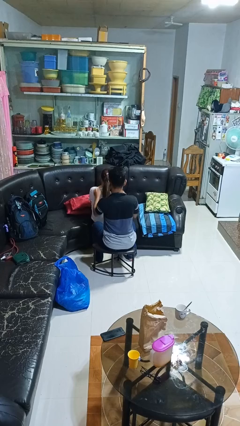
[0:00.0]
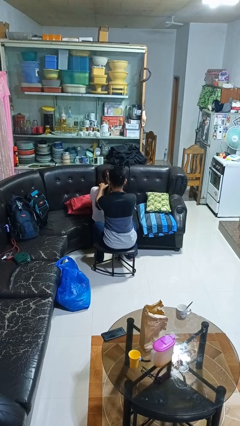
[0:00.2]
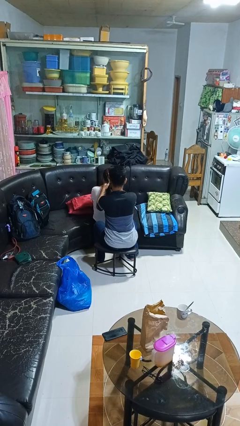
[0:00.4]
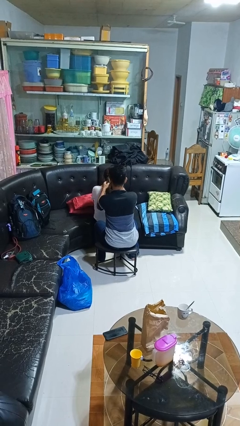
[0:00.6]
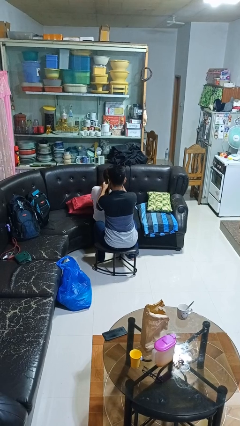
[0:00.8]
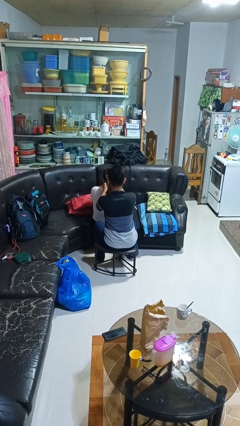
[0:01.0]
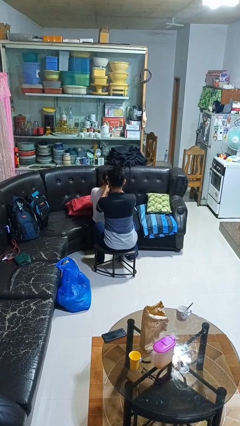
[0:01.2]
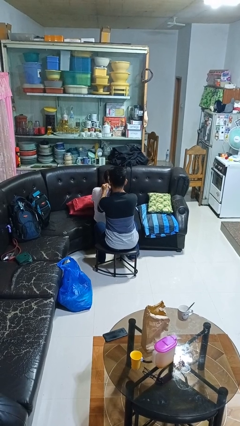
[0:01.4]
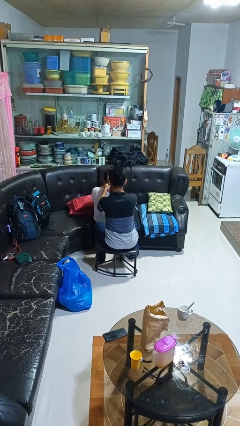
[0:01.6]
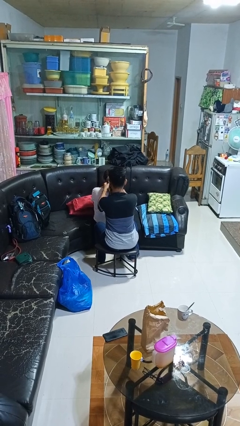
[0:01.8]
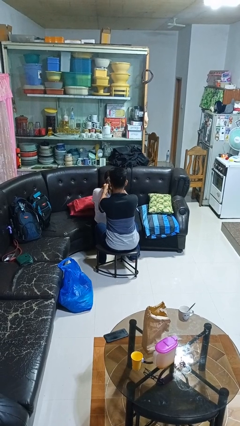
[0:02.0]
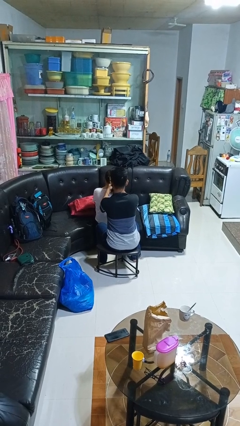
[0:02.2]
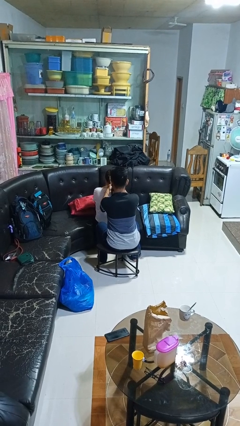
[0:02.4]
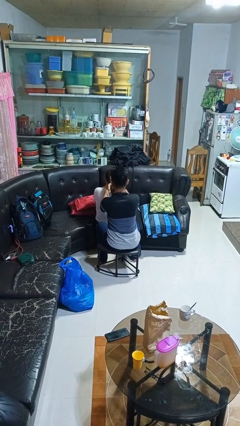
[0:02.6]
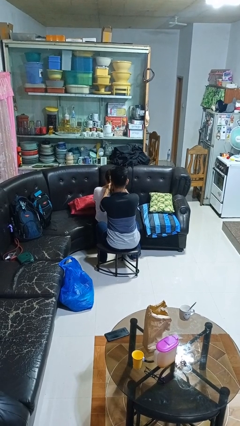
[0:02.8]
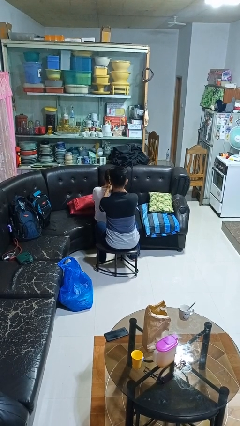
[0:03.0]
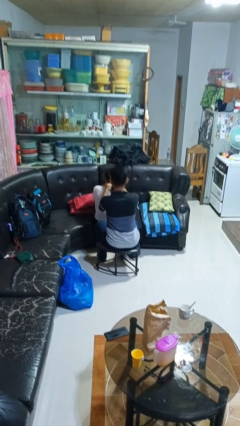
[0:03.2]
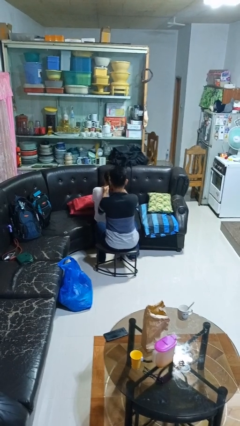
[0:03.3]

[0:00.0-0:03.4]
person braids hair of person

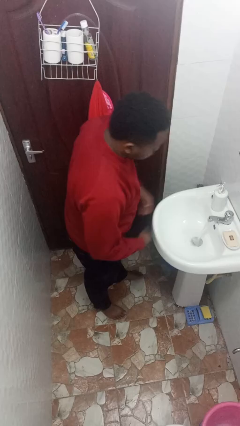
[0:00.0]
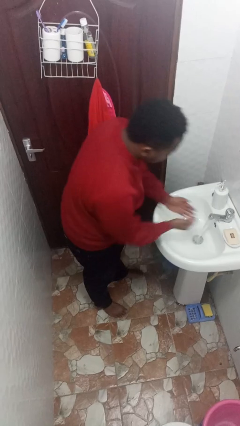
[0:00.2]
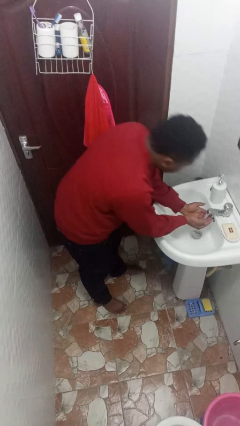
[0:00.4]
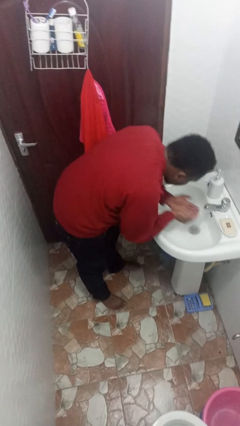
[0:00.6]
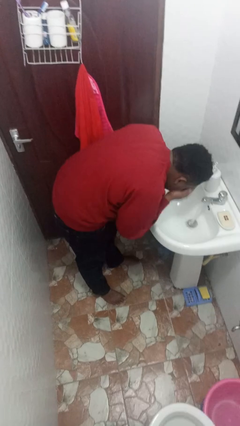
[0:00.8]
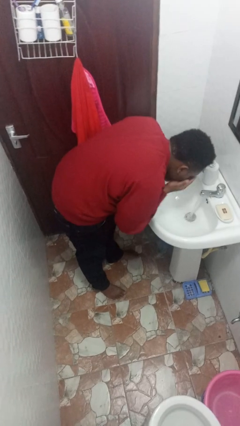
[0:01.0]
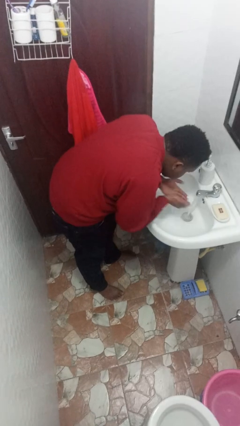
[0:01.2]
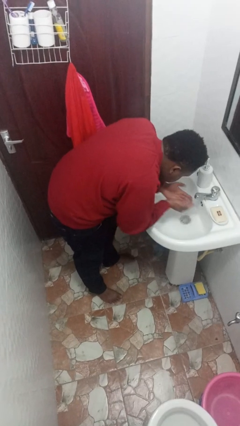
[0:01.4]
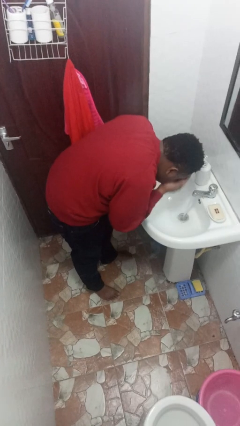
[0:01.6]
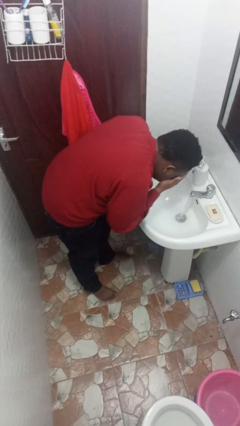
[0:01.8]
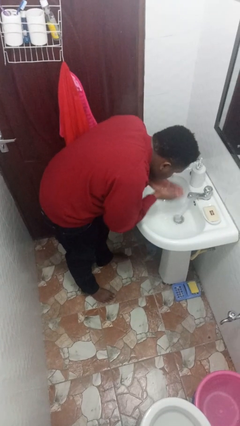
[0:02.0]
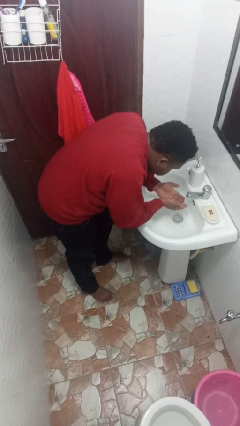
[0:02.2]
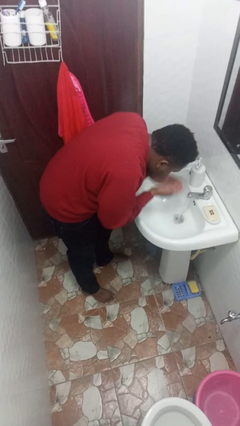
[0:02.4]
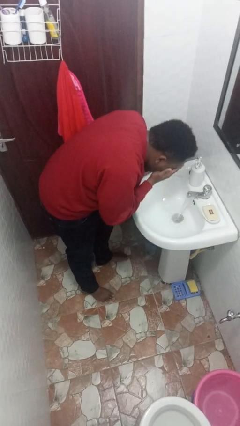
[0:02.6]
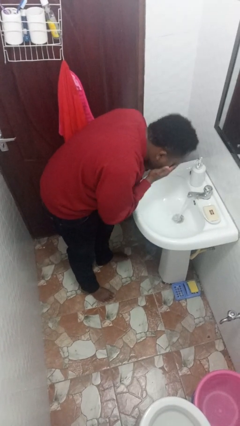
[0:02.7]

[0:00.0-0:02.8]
person washes face

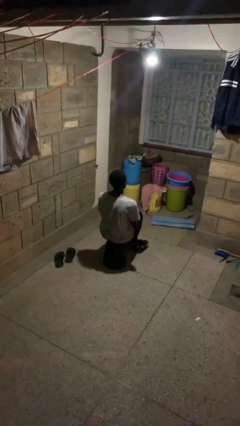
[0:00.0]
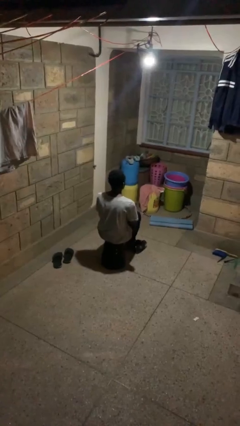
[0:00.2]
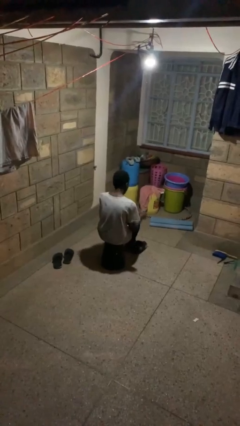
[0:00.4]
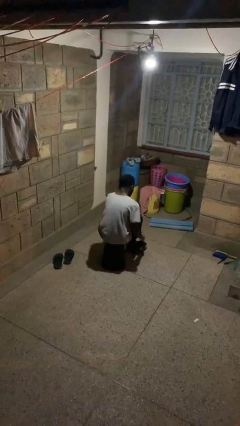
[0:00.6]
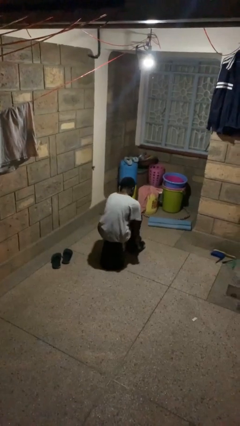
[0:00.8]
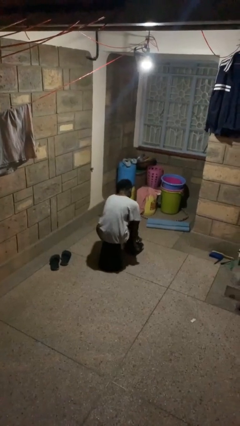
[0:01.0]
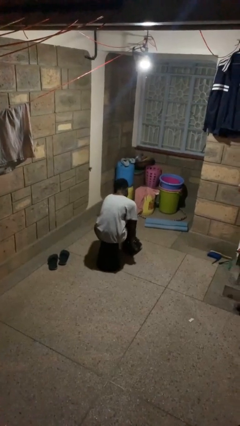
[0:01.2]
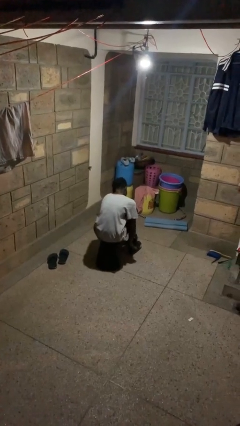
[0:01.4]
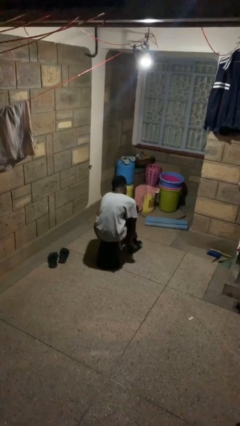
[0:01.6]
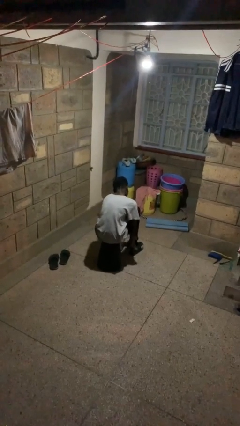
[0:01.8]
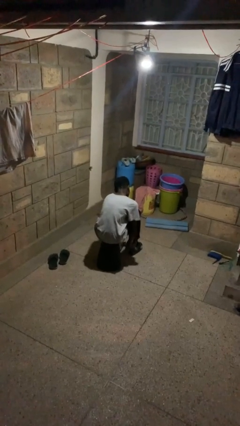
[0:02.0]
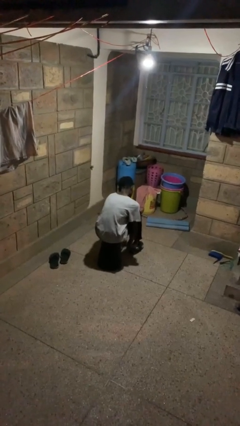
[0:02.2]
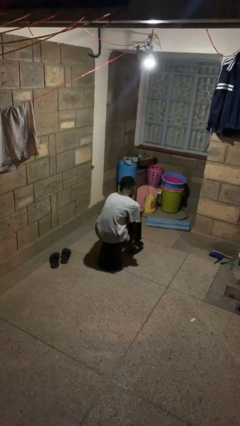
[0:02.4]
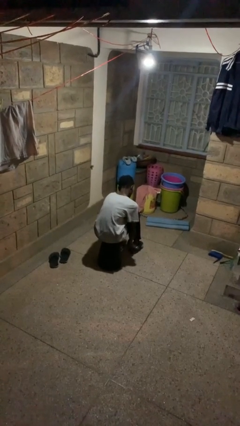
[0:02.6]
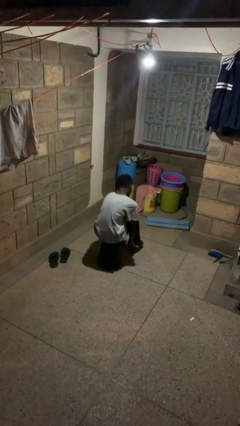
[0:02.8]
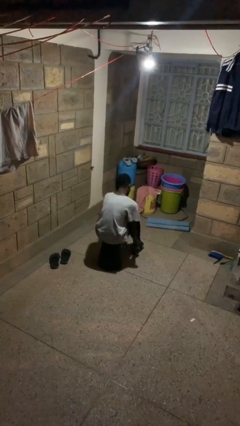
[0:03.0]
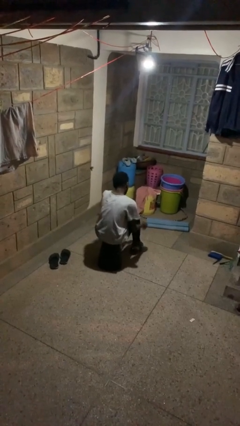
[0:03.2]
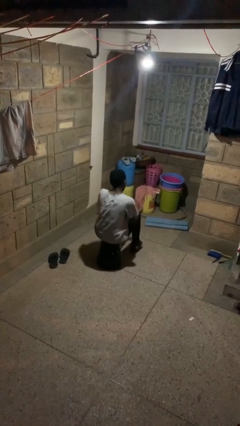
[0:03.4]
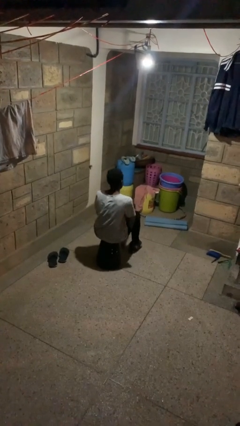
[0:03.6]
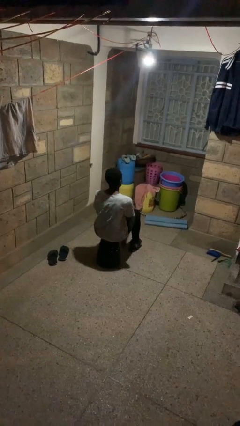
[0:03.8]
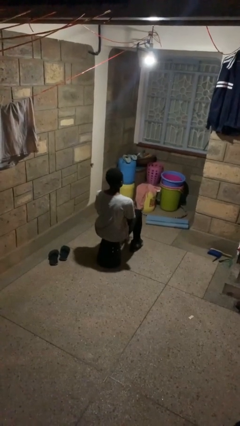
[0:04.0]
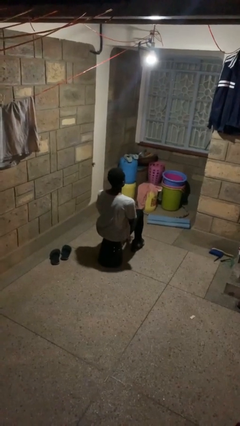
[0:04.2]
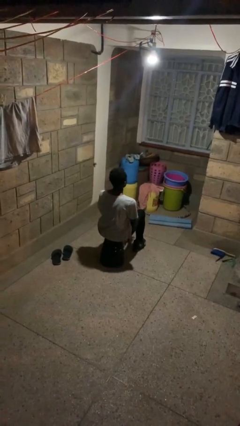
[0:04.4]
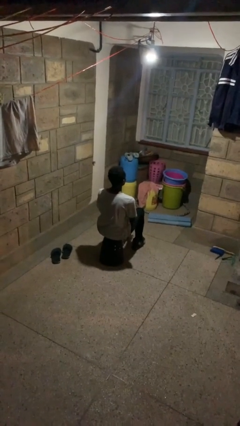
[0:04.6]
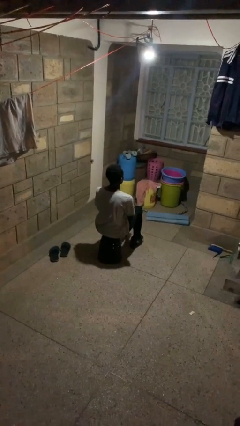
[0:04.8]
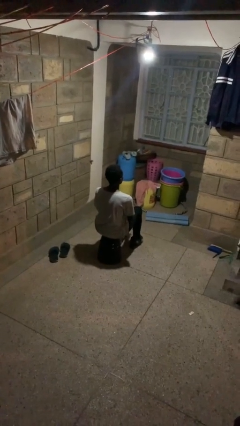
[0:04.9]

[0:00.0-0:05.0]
person puts on shoes

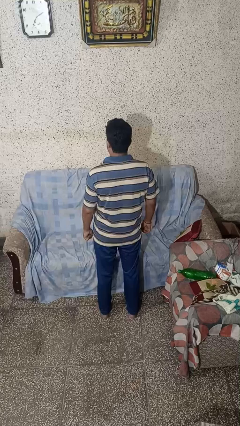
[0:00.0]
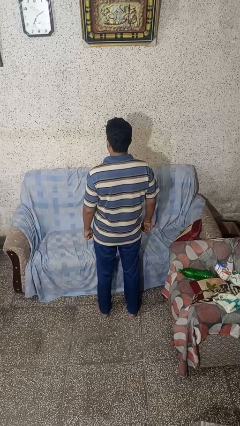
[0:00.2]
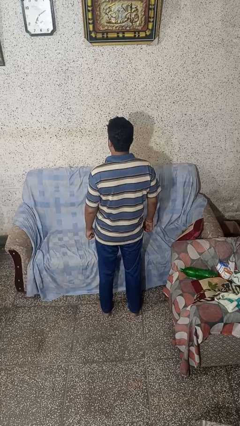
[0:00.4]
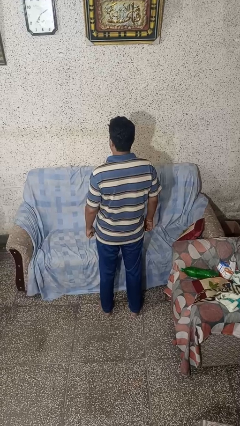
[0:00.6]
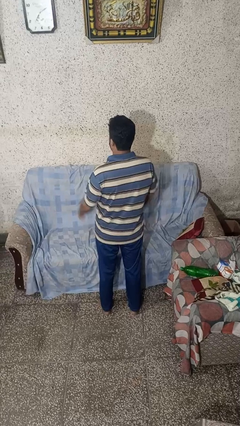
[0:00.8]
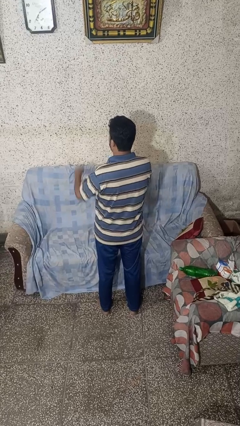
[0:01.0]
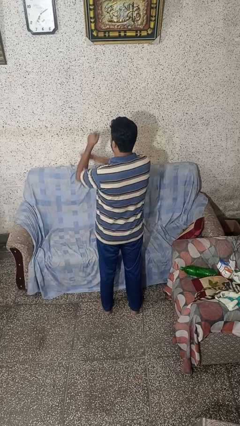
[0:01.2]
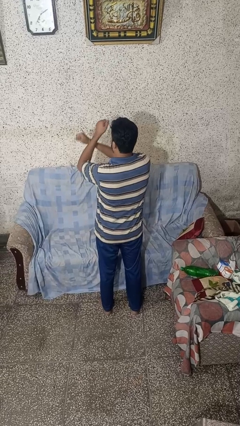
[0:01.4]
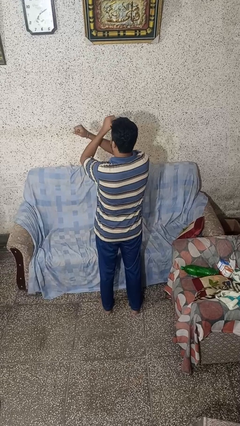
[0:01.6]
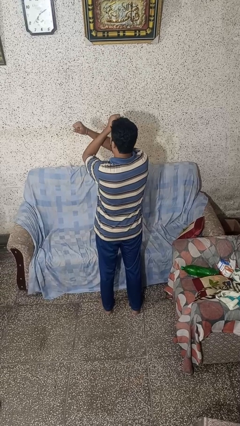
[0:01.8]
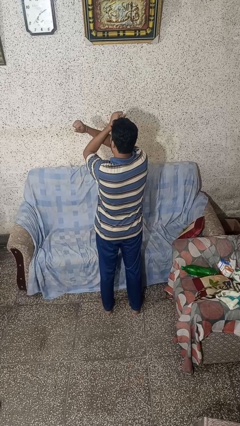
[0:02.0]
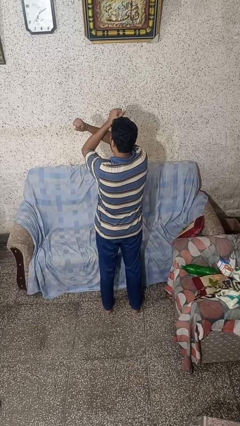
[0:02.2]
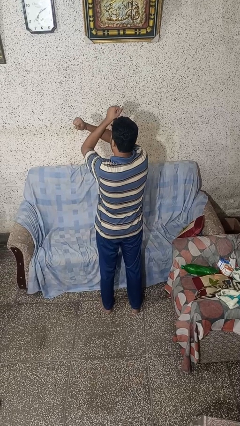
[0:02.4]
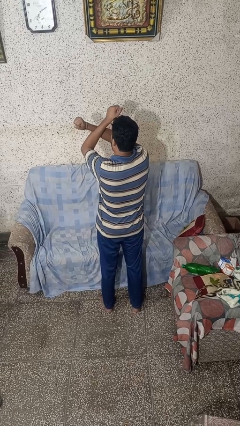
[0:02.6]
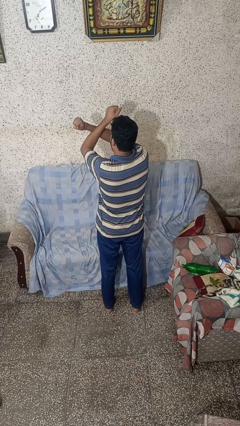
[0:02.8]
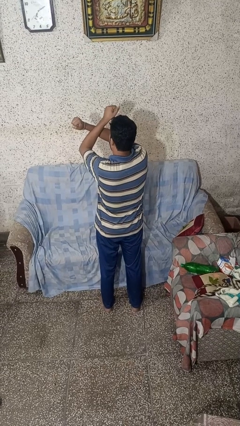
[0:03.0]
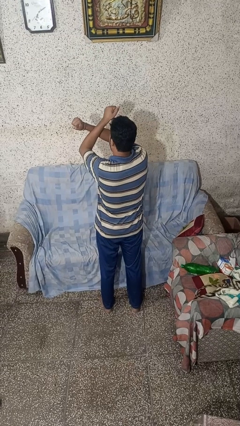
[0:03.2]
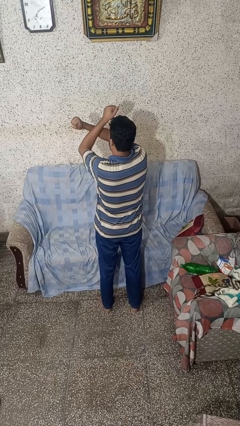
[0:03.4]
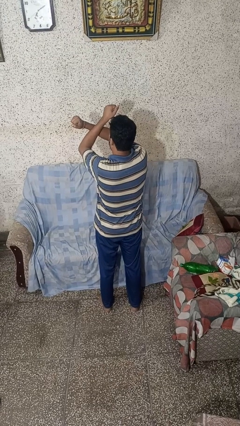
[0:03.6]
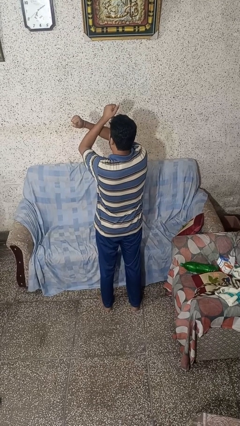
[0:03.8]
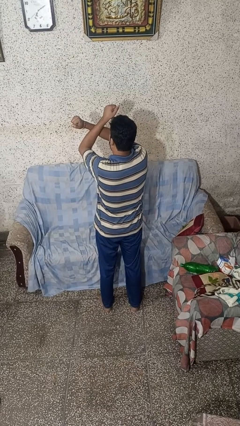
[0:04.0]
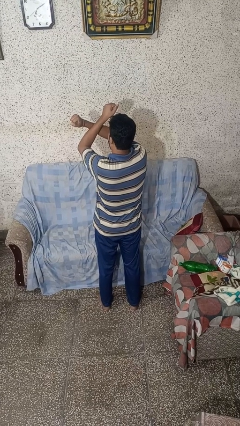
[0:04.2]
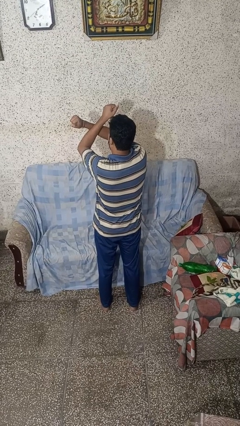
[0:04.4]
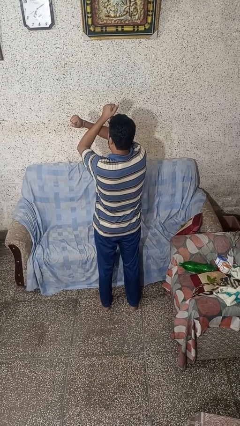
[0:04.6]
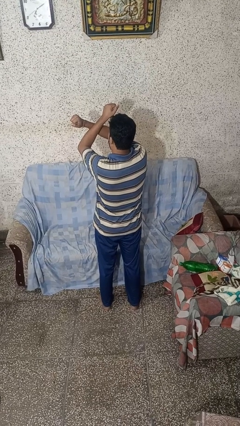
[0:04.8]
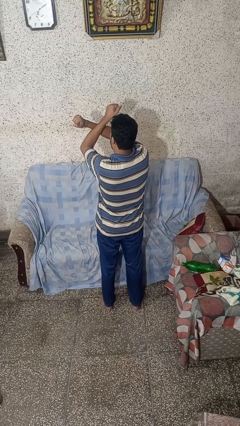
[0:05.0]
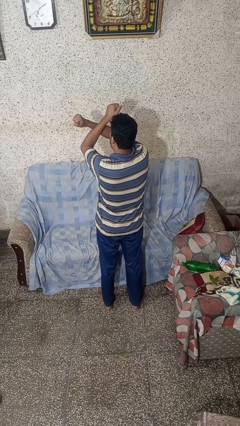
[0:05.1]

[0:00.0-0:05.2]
person gestures arms x

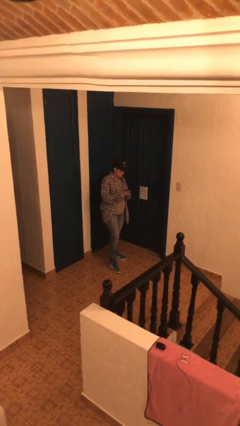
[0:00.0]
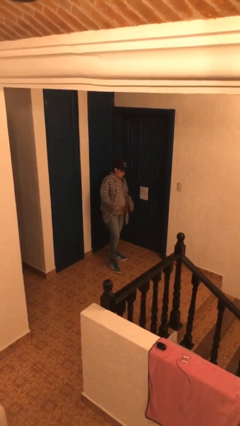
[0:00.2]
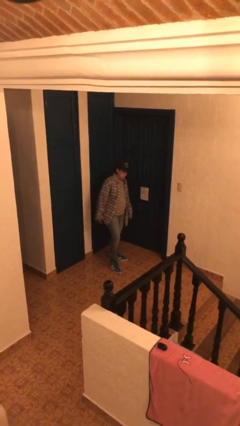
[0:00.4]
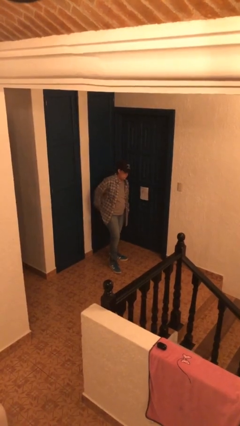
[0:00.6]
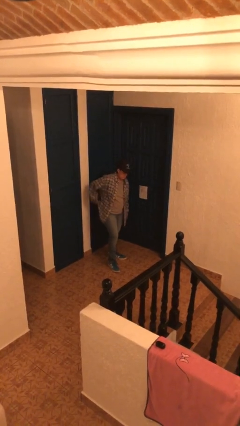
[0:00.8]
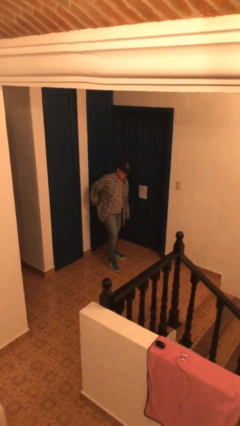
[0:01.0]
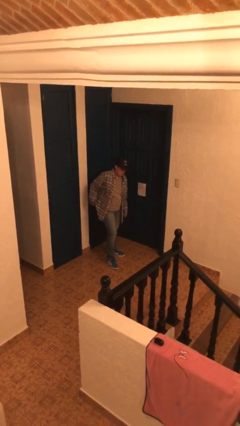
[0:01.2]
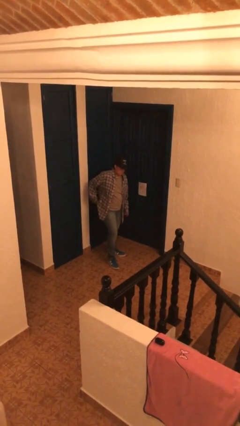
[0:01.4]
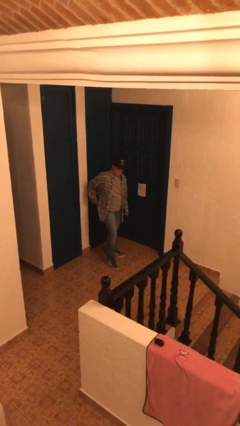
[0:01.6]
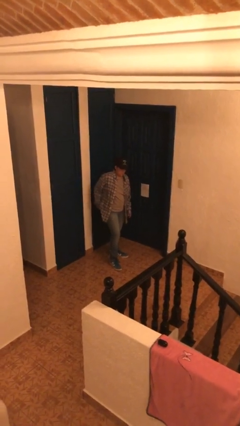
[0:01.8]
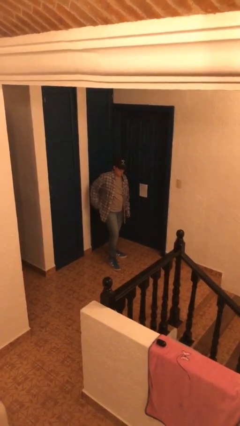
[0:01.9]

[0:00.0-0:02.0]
person puts phone into pocket
